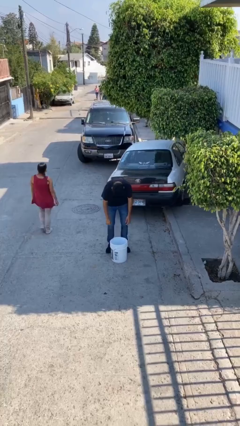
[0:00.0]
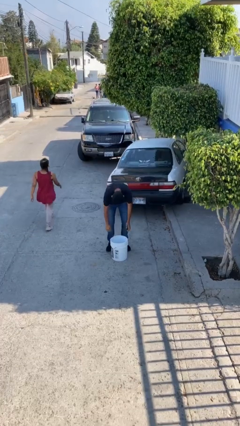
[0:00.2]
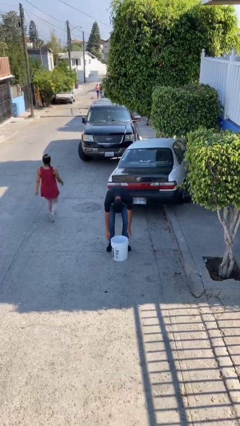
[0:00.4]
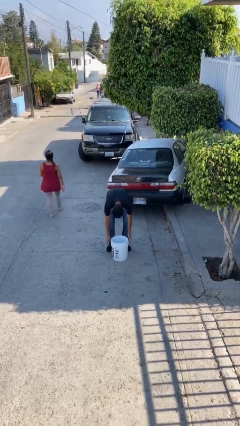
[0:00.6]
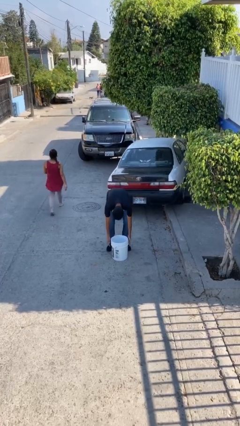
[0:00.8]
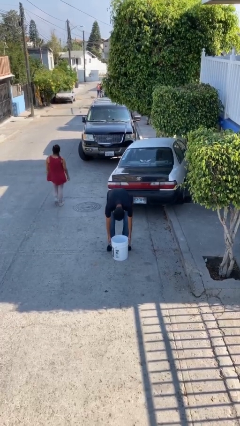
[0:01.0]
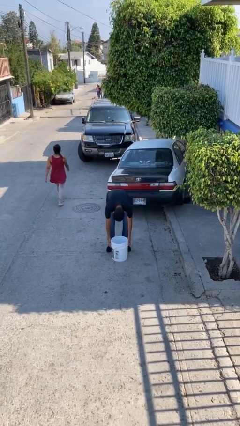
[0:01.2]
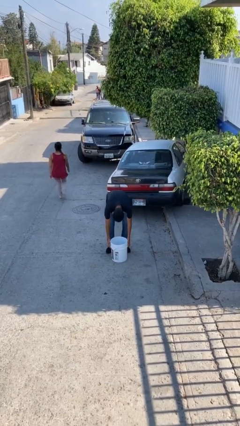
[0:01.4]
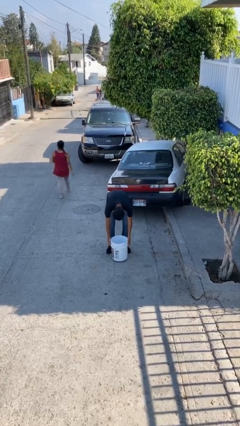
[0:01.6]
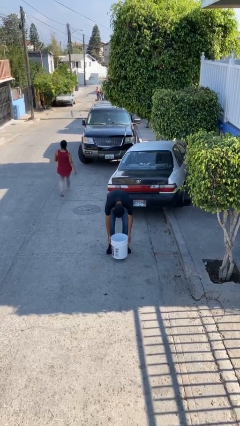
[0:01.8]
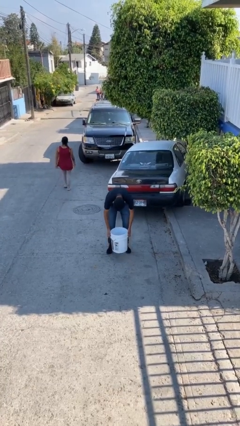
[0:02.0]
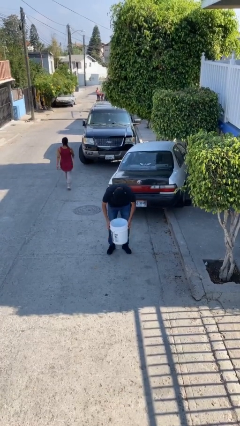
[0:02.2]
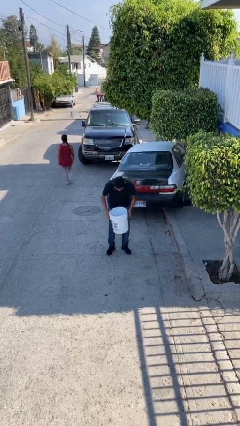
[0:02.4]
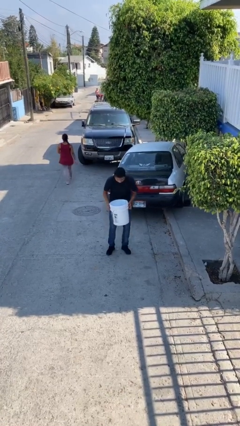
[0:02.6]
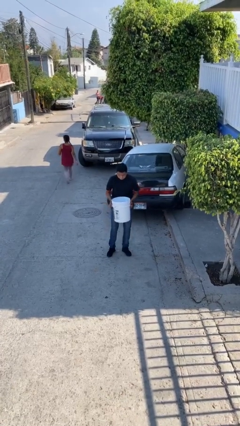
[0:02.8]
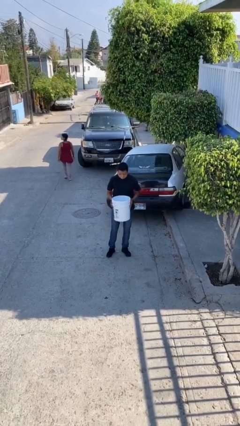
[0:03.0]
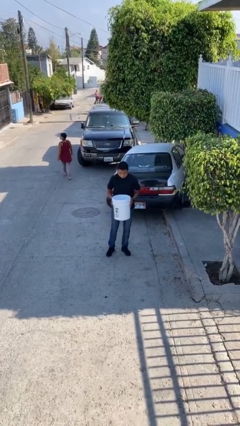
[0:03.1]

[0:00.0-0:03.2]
person picks up object from floor

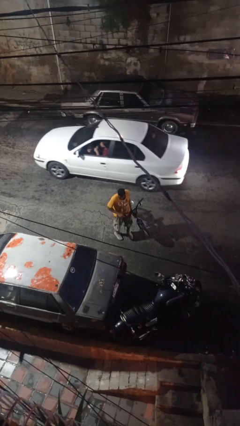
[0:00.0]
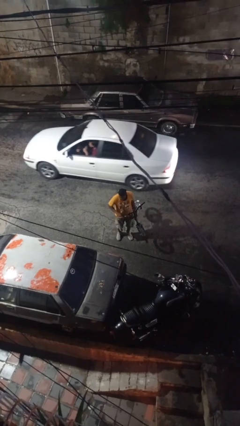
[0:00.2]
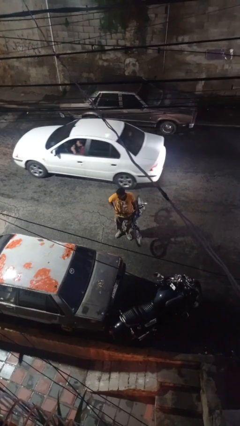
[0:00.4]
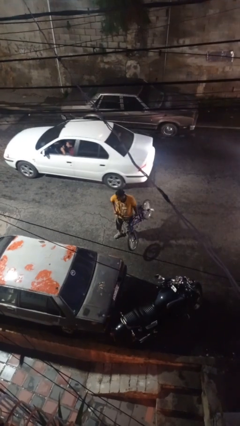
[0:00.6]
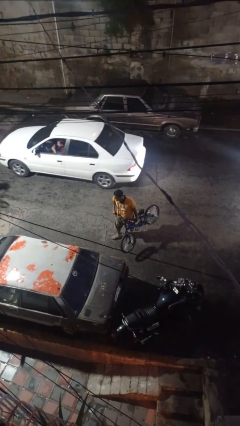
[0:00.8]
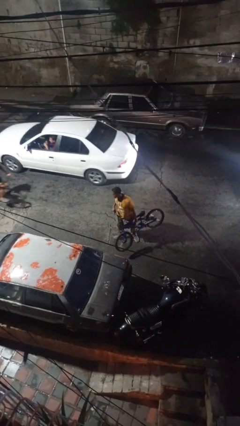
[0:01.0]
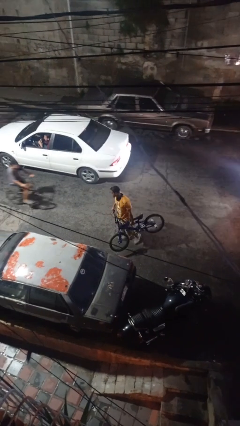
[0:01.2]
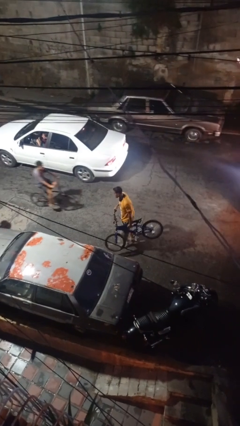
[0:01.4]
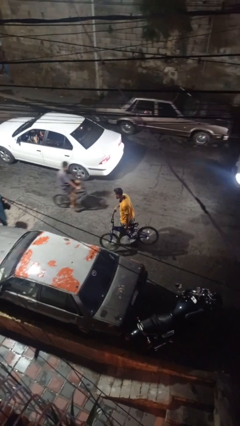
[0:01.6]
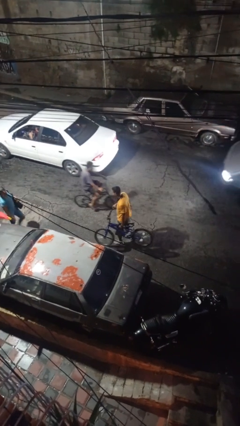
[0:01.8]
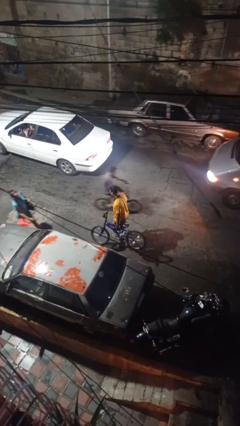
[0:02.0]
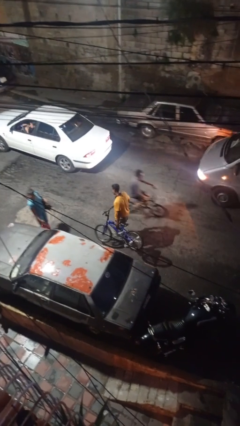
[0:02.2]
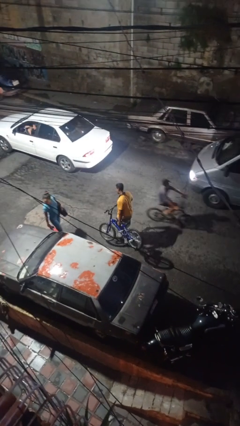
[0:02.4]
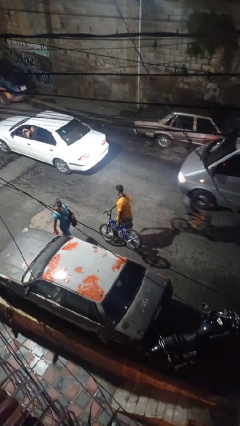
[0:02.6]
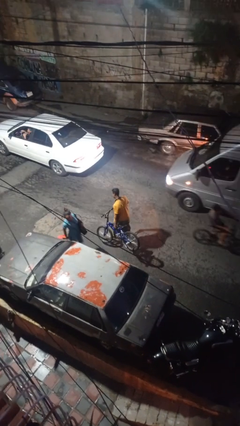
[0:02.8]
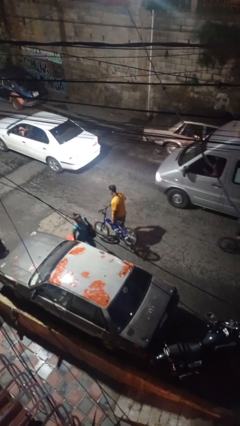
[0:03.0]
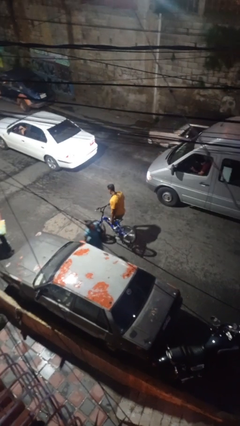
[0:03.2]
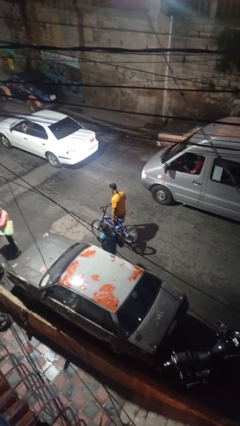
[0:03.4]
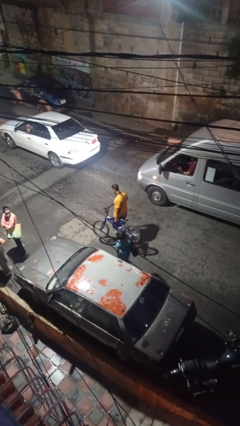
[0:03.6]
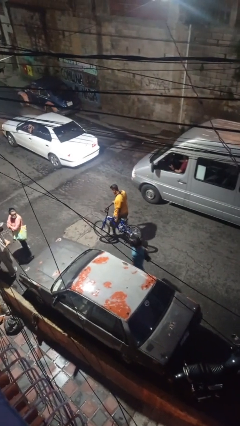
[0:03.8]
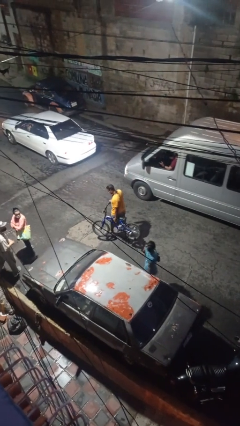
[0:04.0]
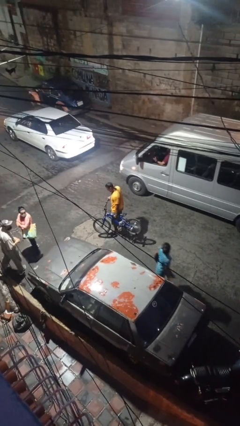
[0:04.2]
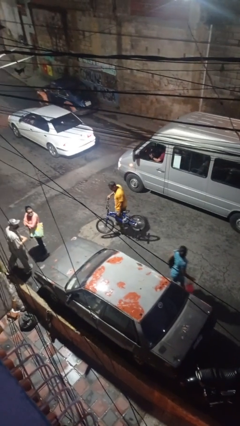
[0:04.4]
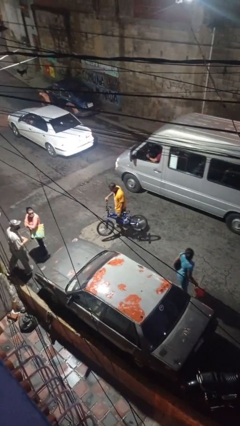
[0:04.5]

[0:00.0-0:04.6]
person carries bicycle

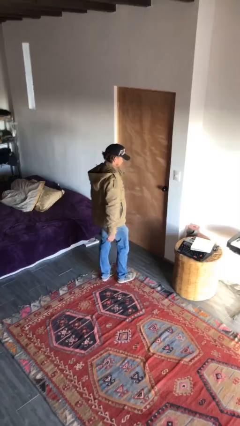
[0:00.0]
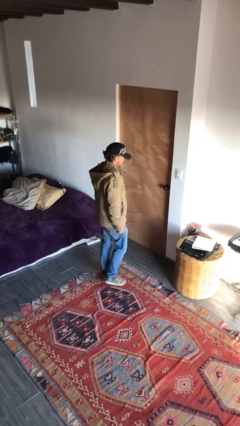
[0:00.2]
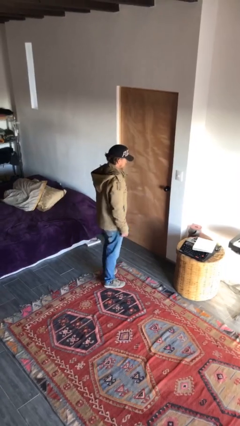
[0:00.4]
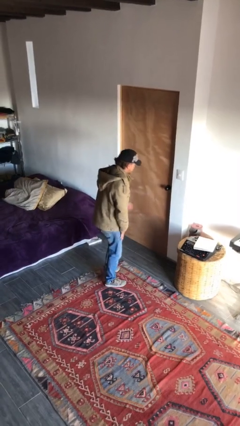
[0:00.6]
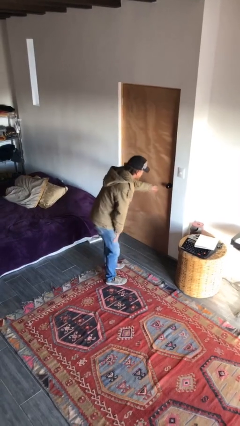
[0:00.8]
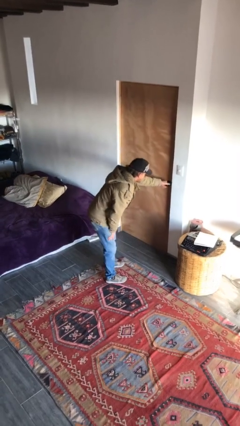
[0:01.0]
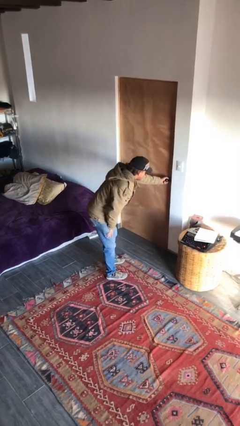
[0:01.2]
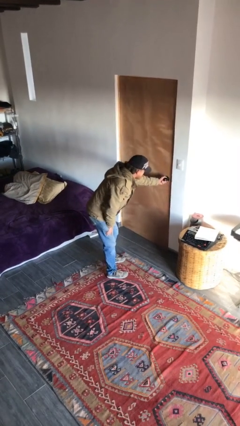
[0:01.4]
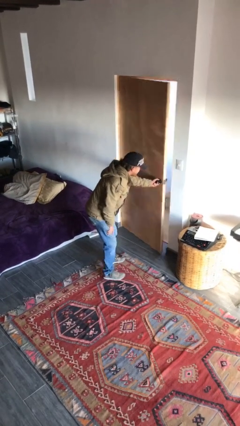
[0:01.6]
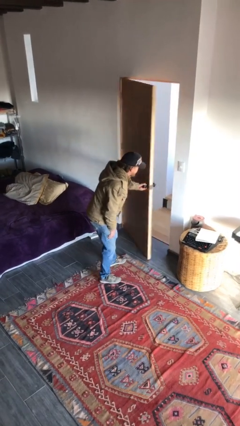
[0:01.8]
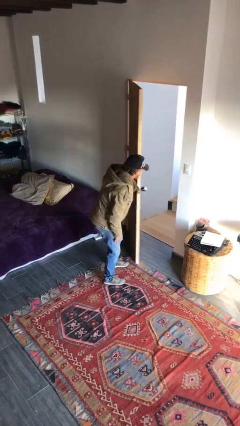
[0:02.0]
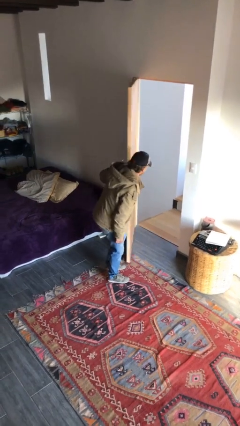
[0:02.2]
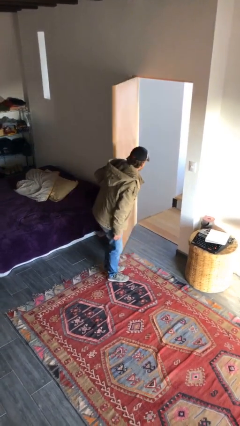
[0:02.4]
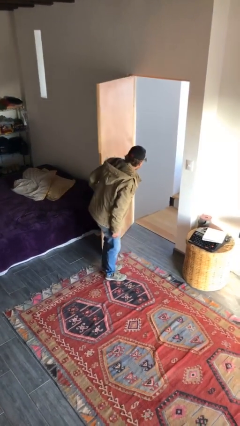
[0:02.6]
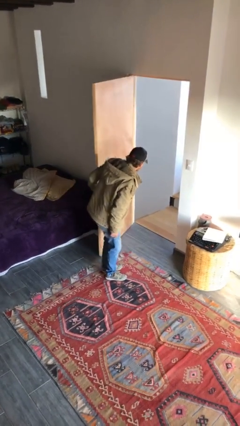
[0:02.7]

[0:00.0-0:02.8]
person opens facility door

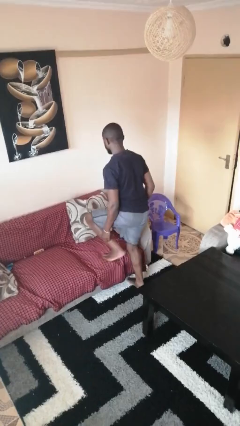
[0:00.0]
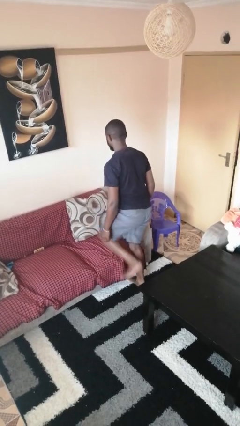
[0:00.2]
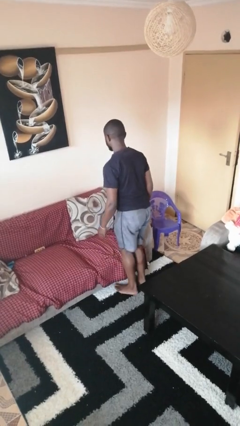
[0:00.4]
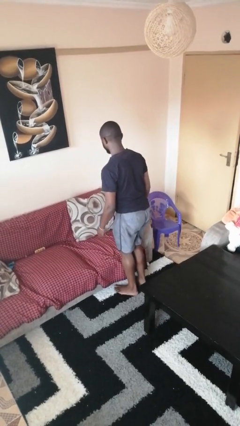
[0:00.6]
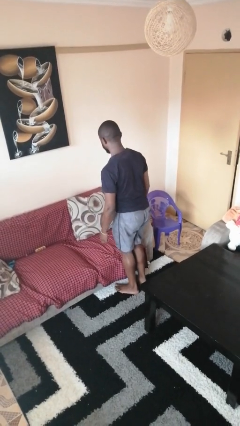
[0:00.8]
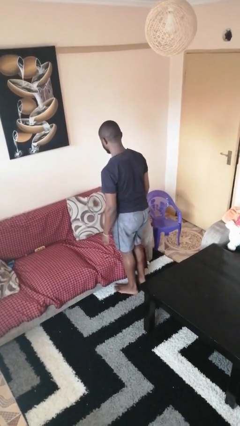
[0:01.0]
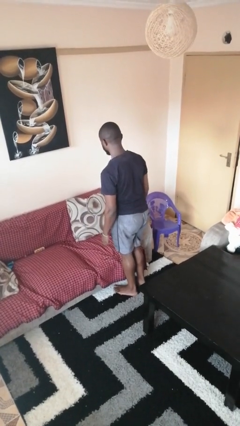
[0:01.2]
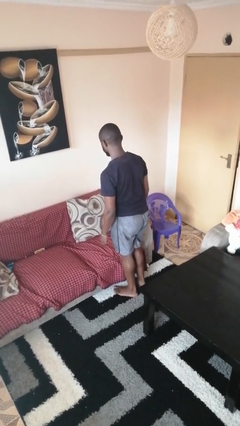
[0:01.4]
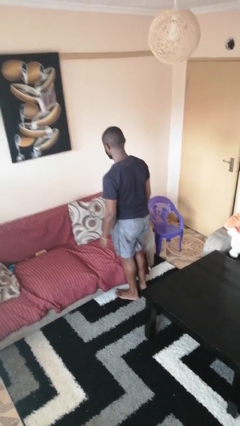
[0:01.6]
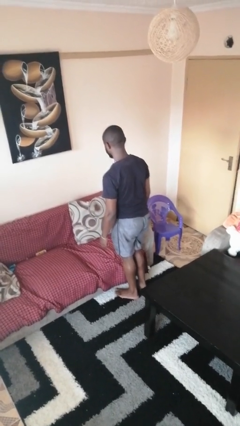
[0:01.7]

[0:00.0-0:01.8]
person climbs off couch

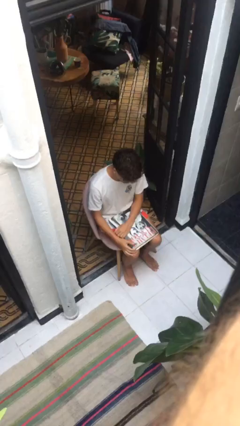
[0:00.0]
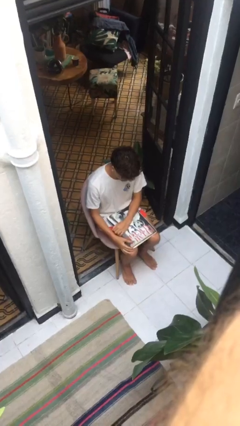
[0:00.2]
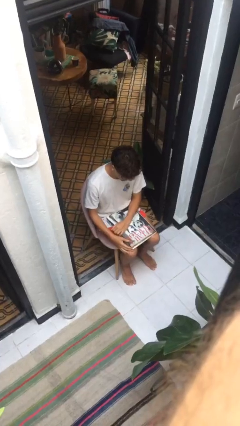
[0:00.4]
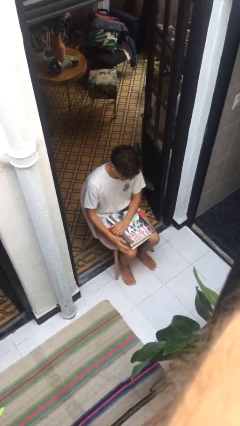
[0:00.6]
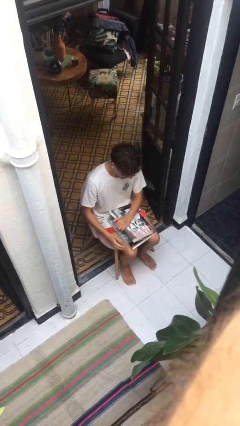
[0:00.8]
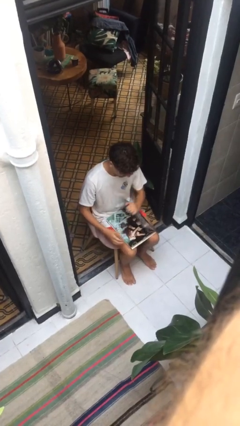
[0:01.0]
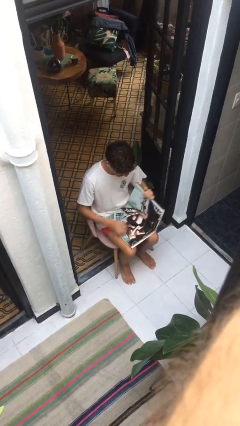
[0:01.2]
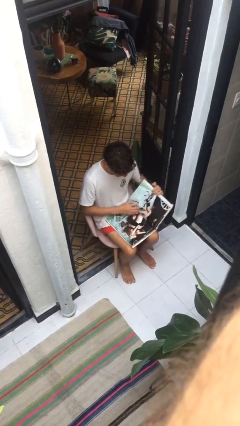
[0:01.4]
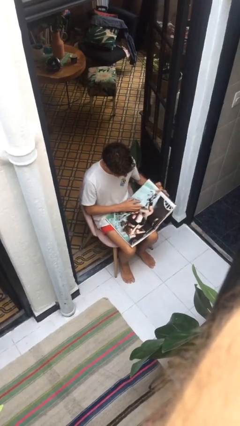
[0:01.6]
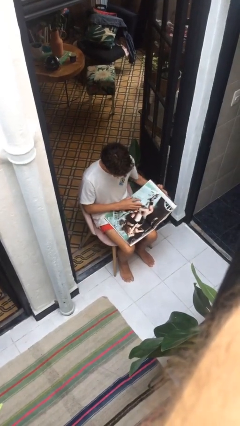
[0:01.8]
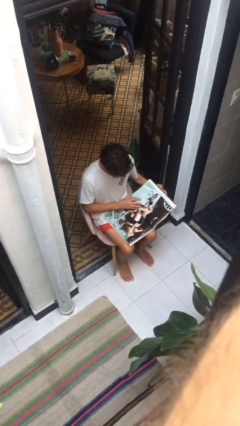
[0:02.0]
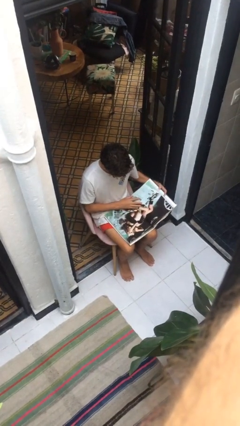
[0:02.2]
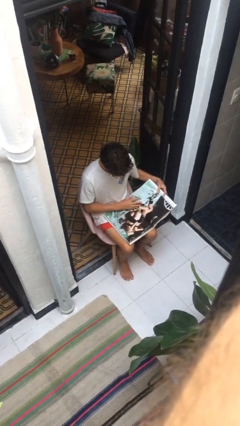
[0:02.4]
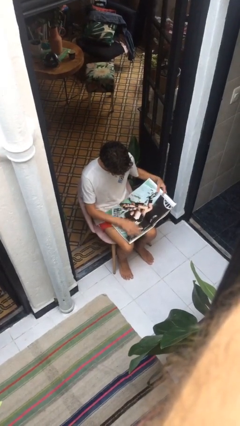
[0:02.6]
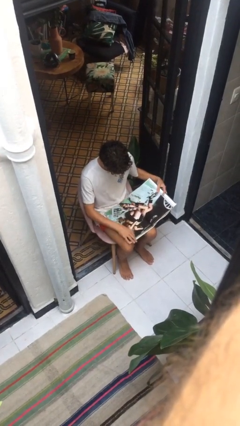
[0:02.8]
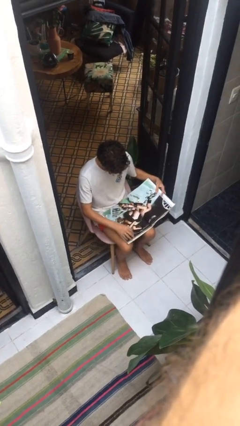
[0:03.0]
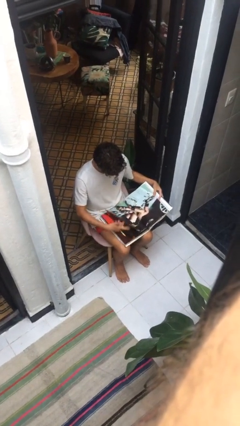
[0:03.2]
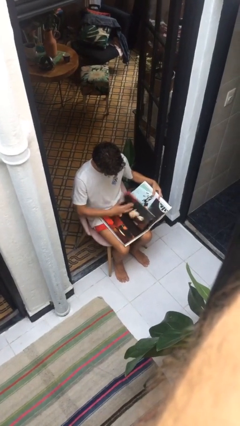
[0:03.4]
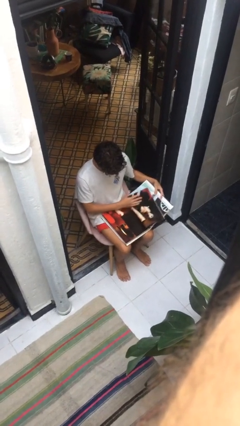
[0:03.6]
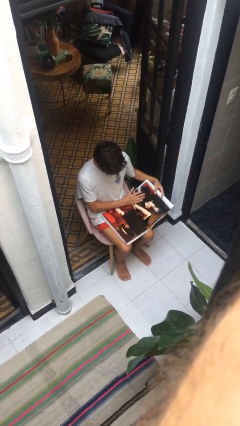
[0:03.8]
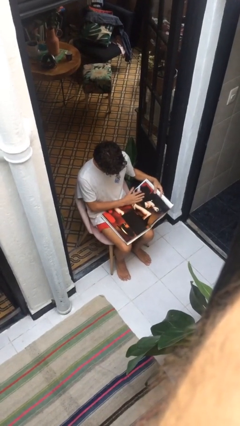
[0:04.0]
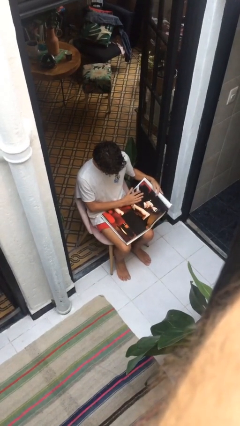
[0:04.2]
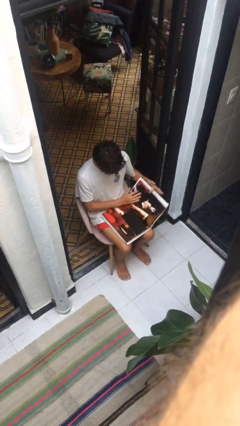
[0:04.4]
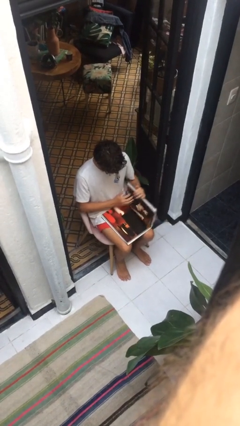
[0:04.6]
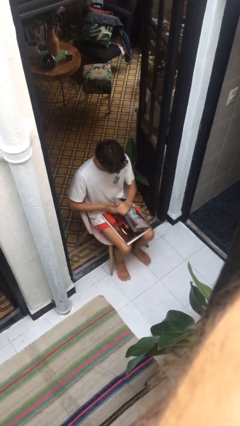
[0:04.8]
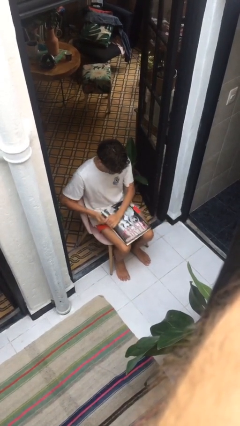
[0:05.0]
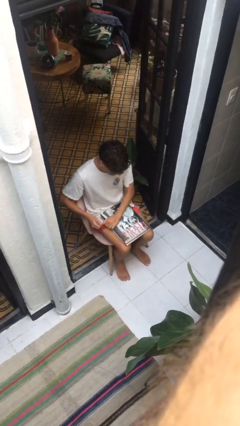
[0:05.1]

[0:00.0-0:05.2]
person reads document
